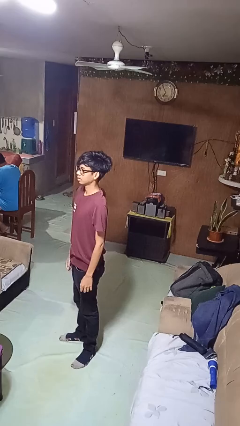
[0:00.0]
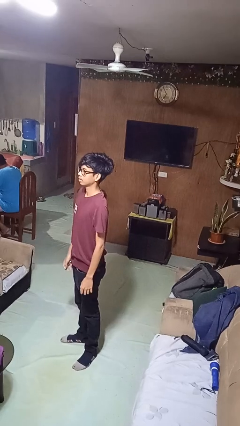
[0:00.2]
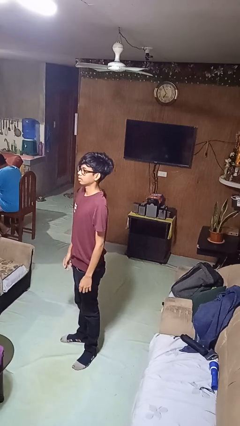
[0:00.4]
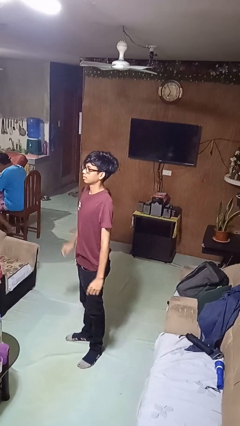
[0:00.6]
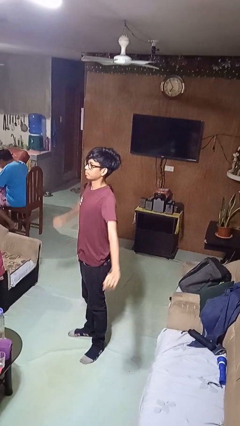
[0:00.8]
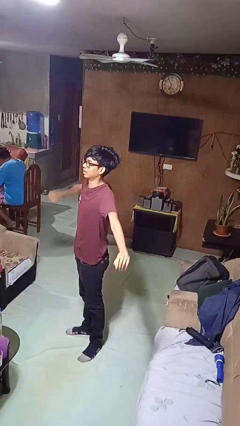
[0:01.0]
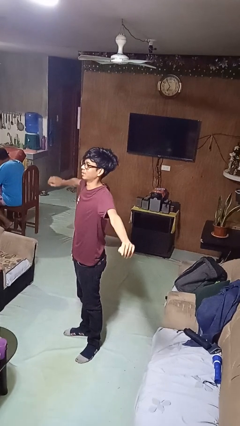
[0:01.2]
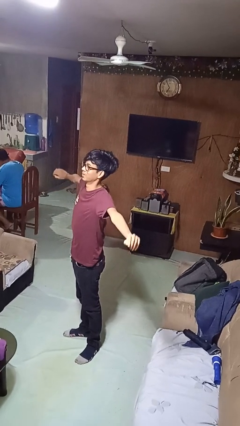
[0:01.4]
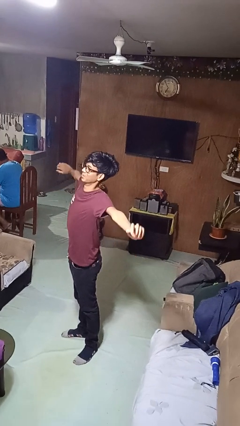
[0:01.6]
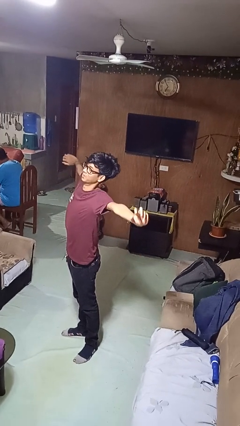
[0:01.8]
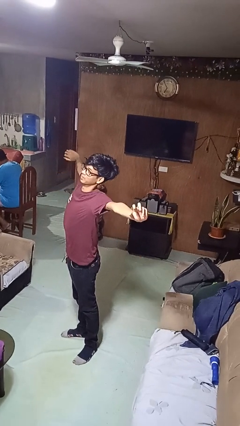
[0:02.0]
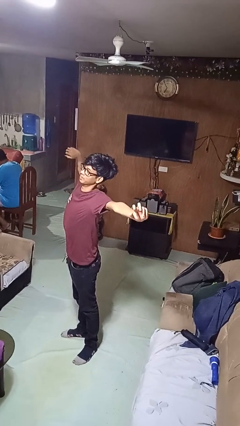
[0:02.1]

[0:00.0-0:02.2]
person stretches arms to side

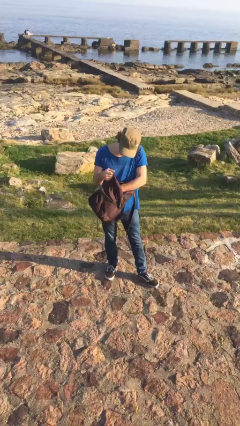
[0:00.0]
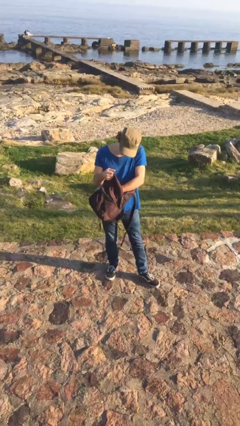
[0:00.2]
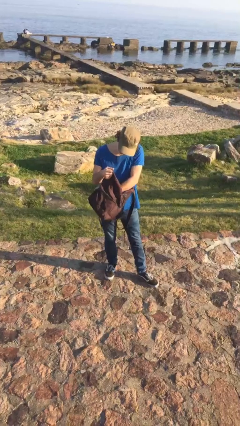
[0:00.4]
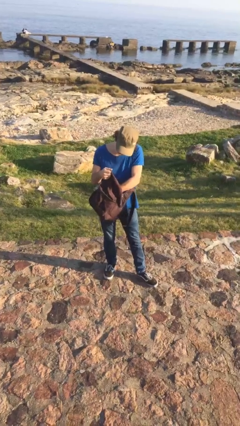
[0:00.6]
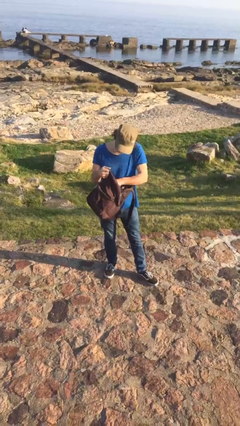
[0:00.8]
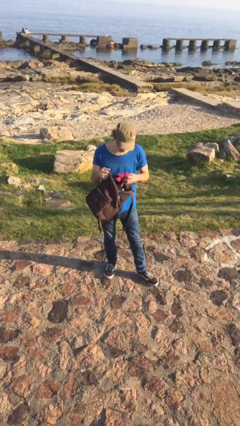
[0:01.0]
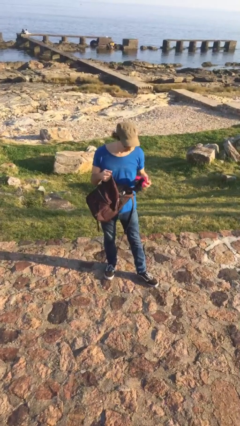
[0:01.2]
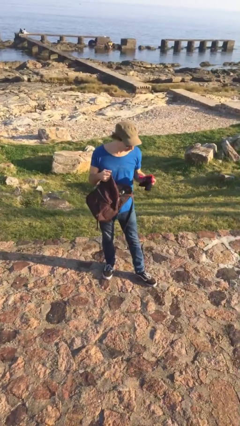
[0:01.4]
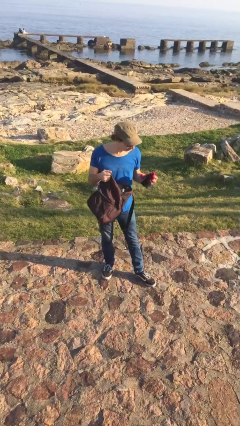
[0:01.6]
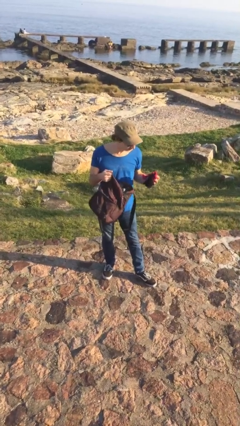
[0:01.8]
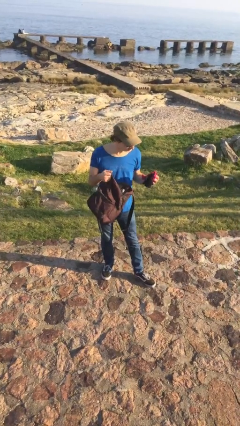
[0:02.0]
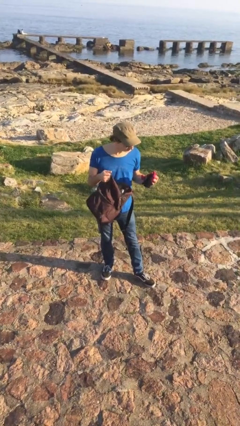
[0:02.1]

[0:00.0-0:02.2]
person takes object from backpack

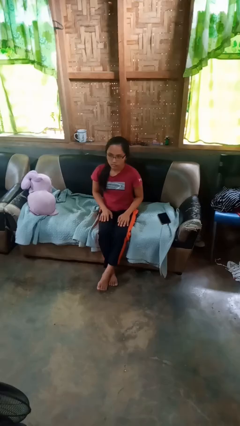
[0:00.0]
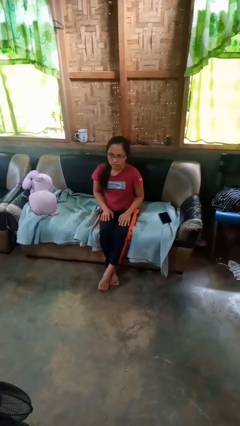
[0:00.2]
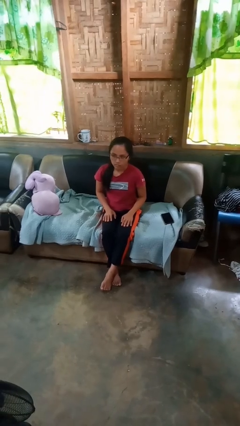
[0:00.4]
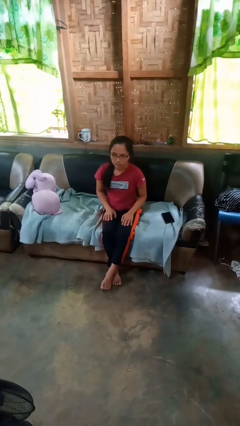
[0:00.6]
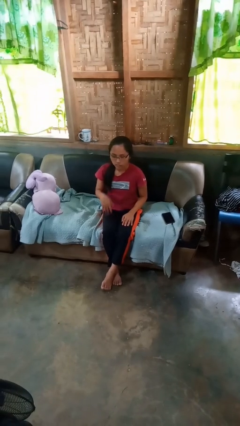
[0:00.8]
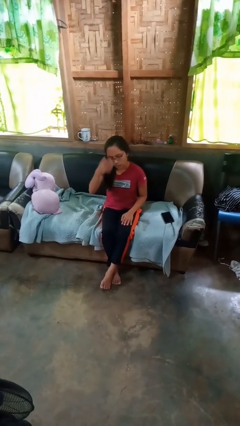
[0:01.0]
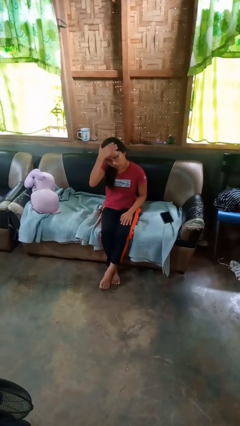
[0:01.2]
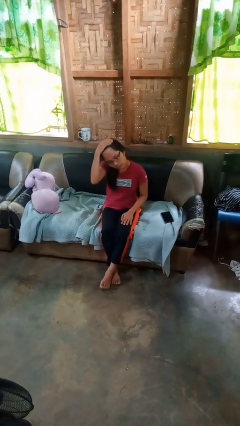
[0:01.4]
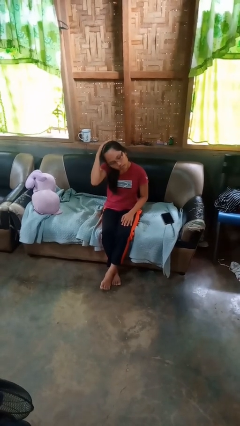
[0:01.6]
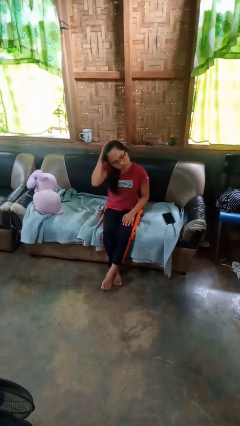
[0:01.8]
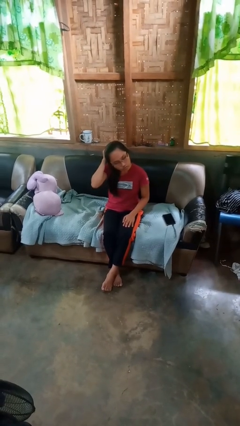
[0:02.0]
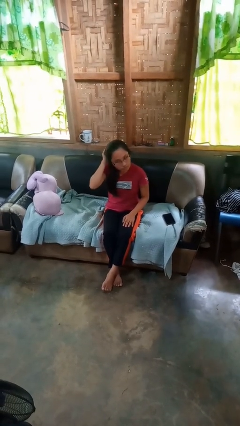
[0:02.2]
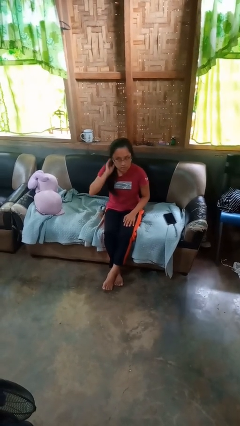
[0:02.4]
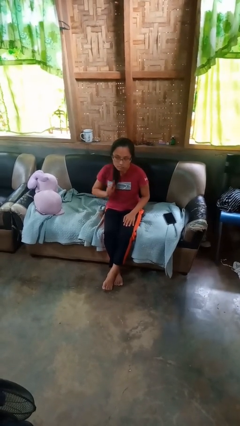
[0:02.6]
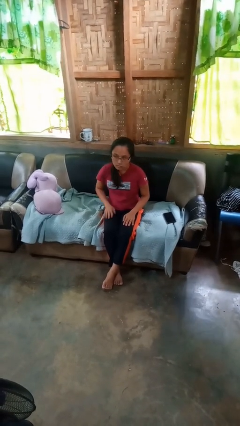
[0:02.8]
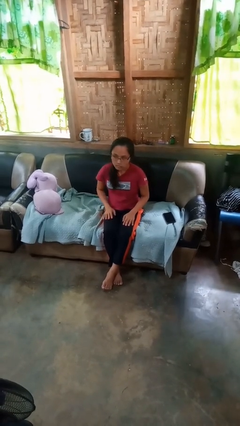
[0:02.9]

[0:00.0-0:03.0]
person strokes hair

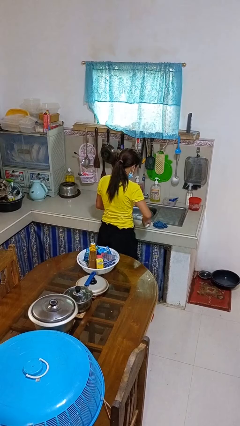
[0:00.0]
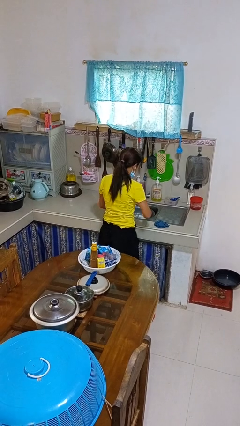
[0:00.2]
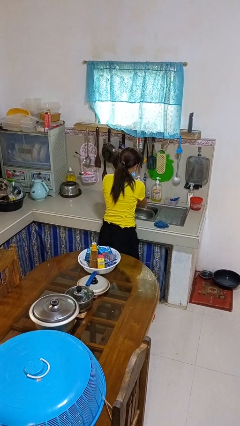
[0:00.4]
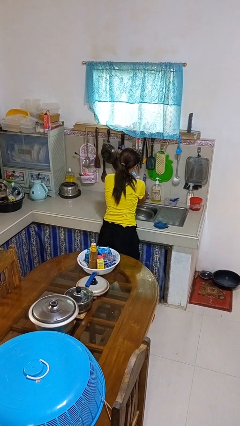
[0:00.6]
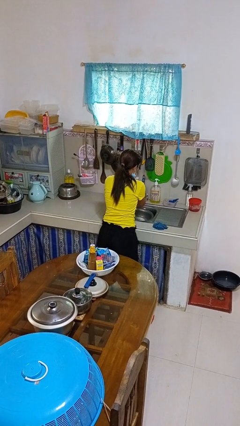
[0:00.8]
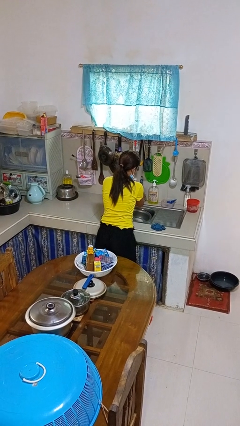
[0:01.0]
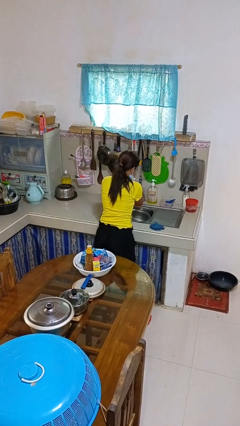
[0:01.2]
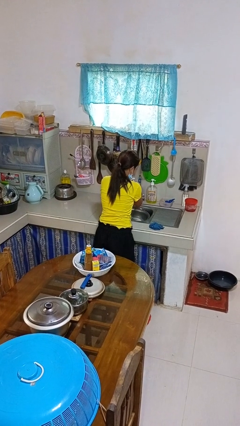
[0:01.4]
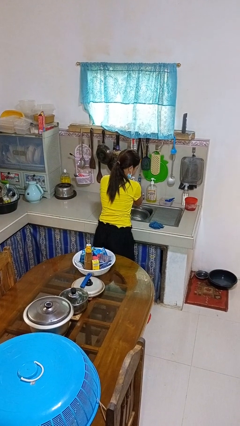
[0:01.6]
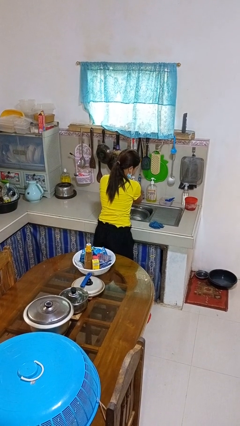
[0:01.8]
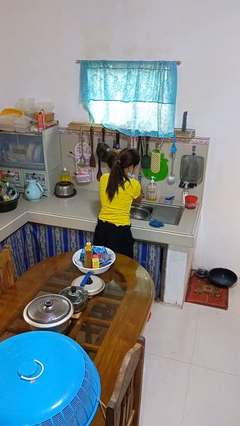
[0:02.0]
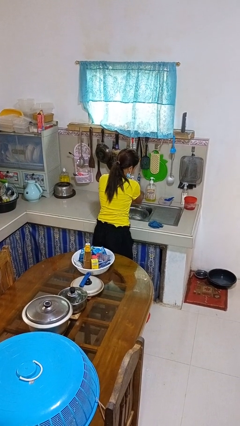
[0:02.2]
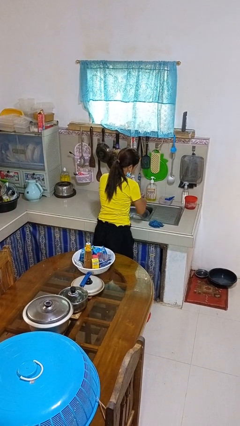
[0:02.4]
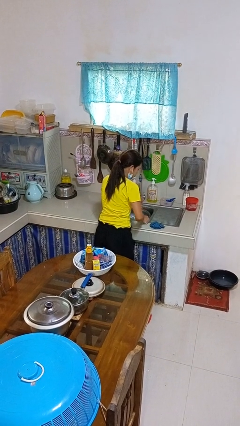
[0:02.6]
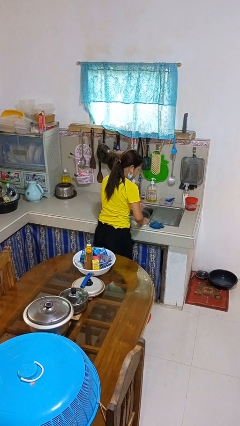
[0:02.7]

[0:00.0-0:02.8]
person washes hands

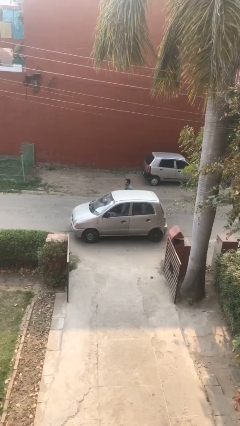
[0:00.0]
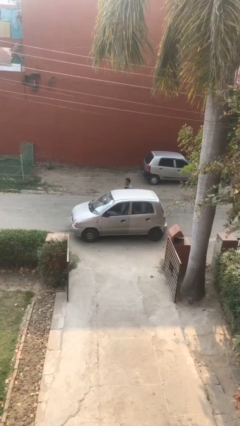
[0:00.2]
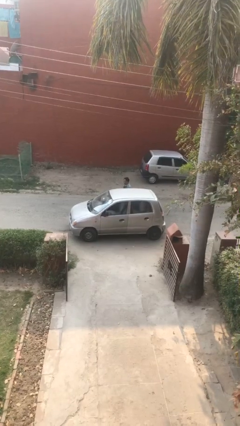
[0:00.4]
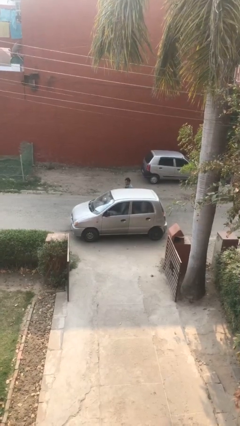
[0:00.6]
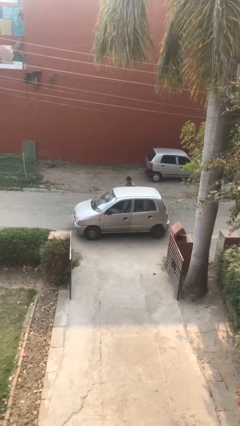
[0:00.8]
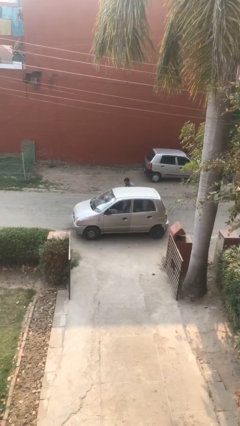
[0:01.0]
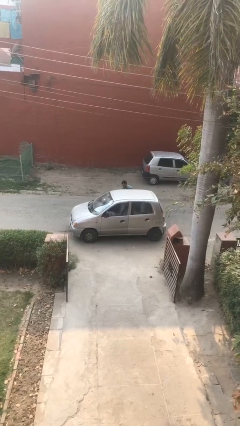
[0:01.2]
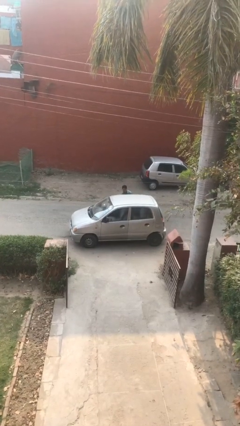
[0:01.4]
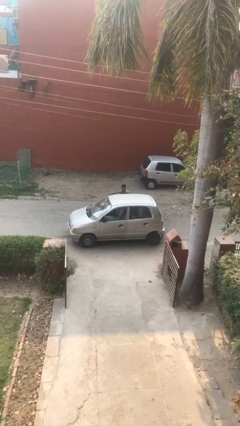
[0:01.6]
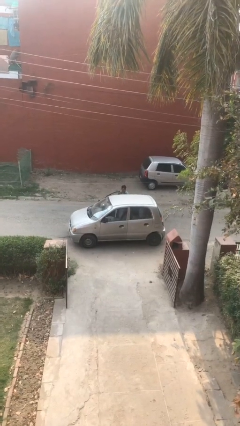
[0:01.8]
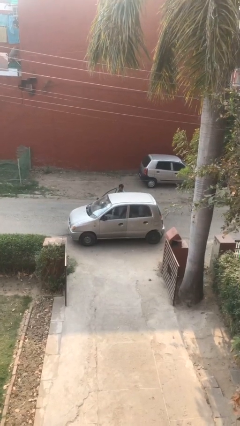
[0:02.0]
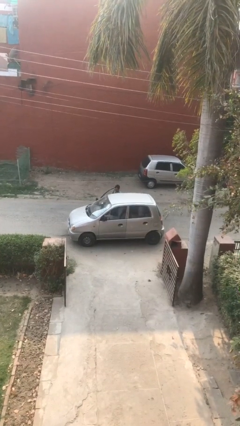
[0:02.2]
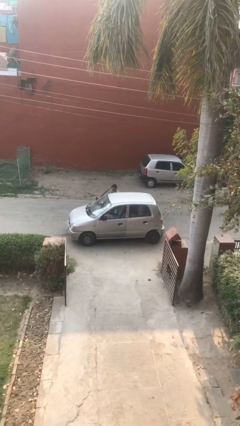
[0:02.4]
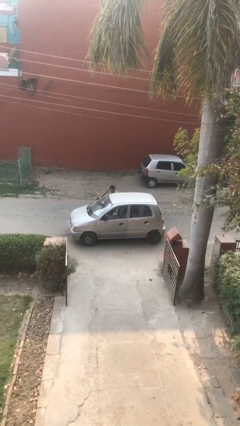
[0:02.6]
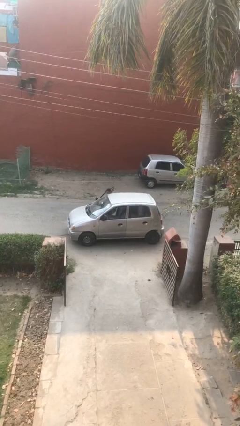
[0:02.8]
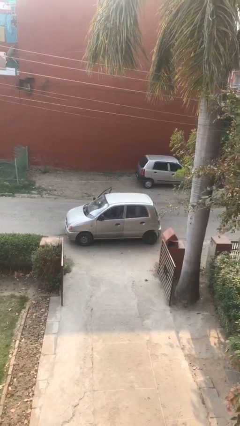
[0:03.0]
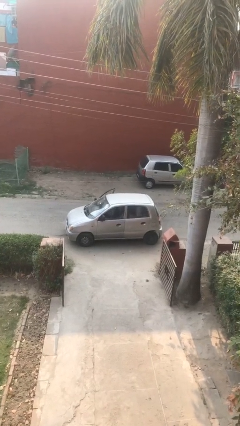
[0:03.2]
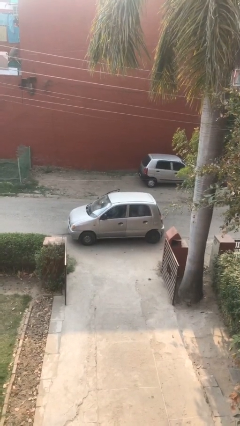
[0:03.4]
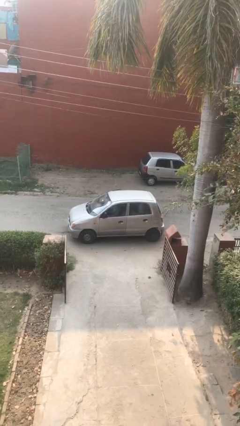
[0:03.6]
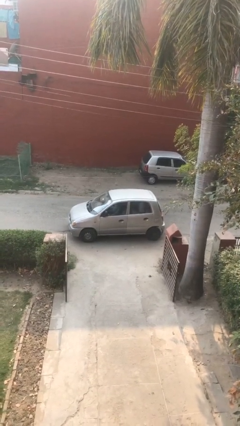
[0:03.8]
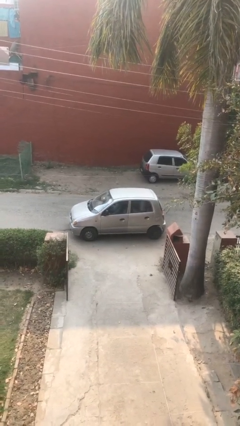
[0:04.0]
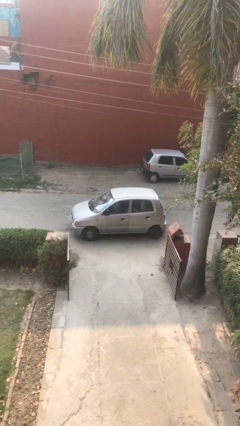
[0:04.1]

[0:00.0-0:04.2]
car picks up person

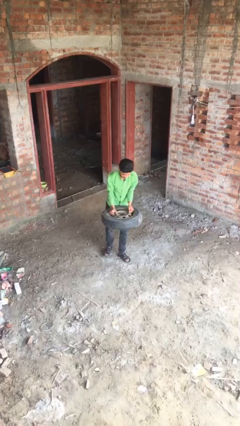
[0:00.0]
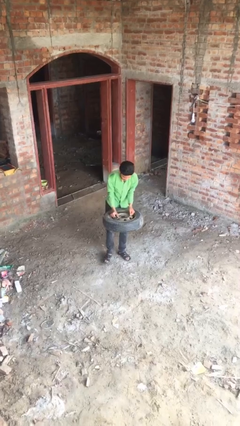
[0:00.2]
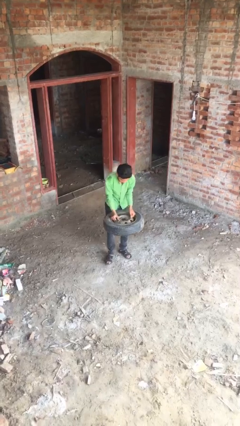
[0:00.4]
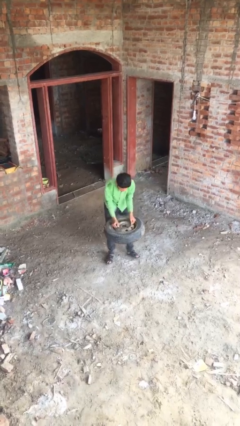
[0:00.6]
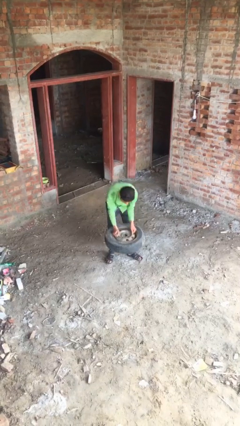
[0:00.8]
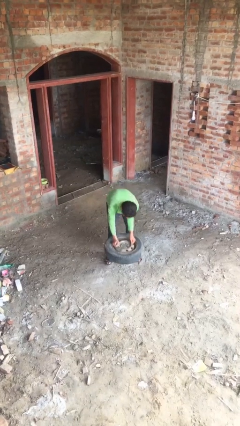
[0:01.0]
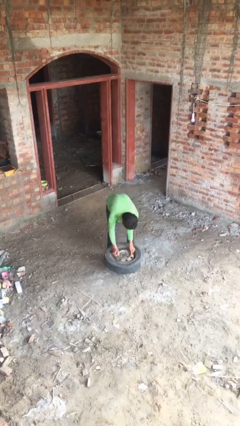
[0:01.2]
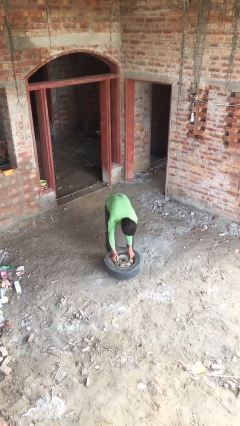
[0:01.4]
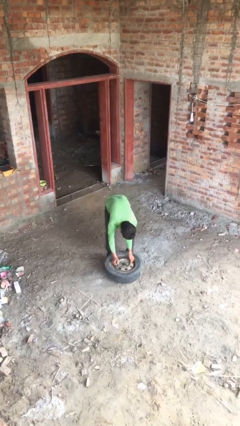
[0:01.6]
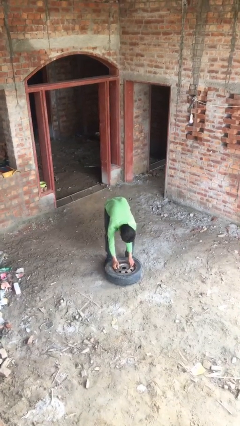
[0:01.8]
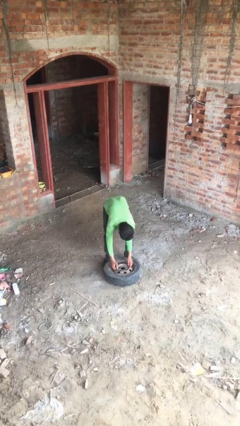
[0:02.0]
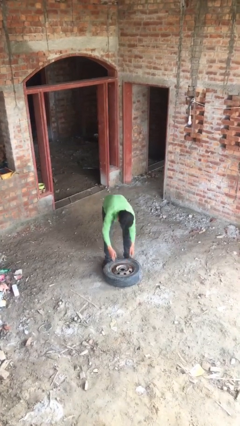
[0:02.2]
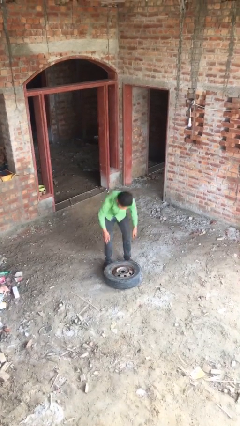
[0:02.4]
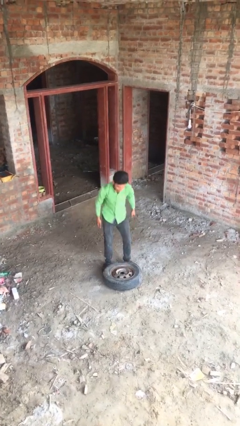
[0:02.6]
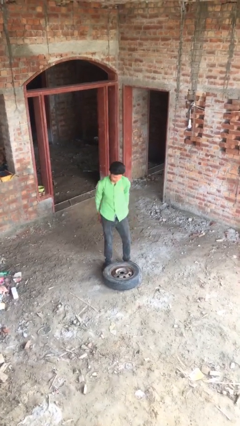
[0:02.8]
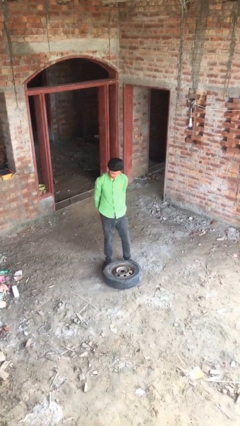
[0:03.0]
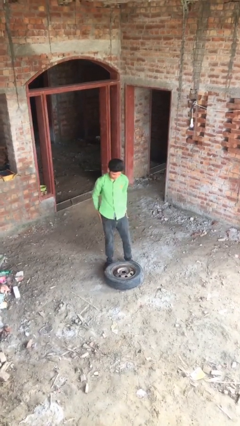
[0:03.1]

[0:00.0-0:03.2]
person puts down object on floor
